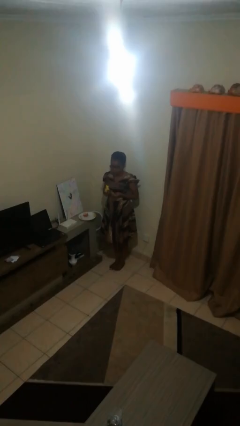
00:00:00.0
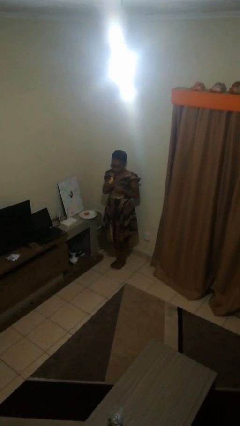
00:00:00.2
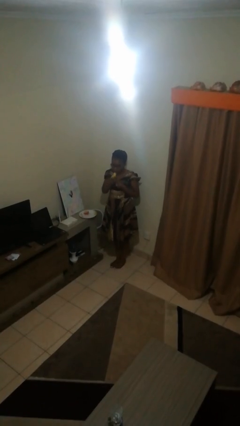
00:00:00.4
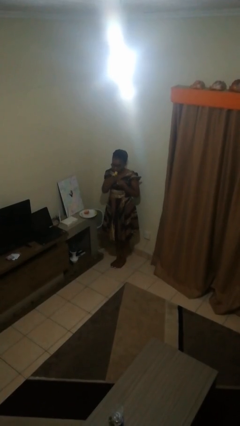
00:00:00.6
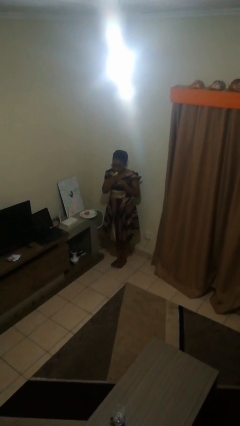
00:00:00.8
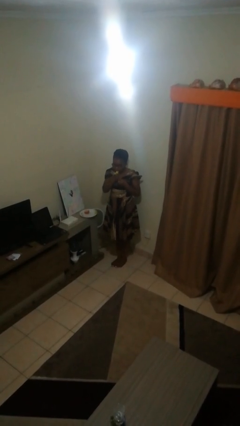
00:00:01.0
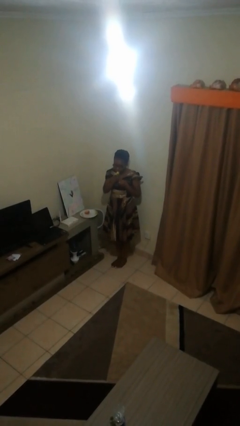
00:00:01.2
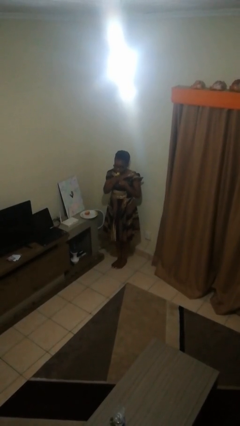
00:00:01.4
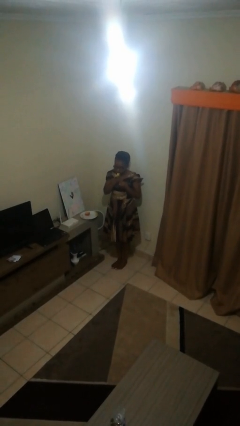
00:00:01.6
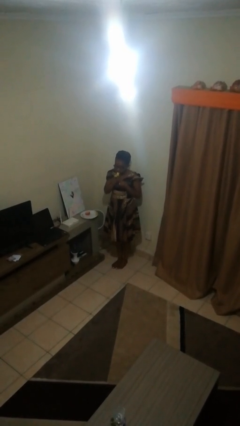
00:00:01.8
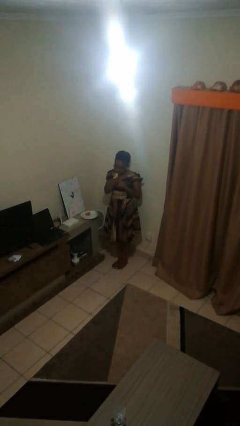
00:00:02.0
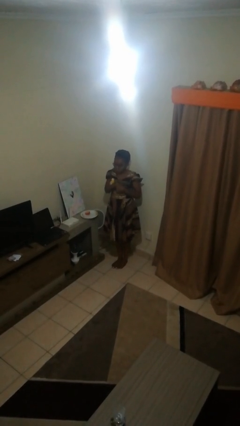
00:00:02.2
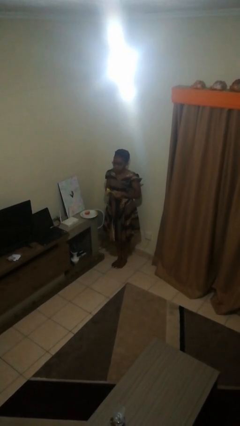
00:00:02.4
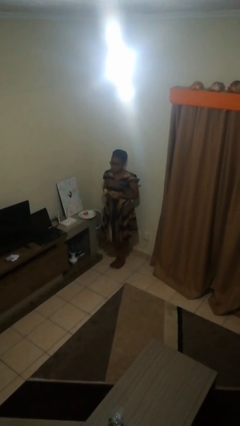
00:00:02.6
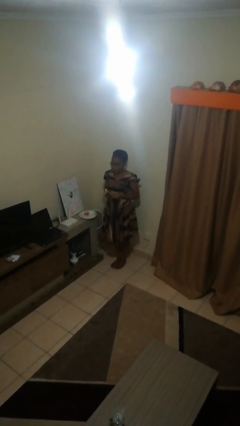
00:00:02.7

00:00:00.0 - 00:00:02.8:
person eats banana

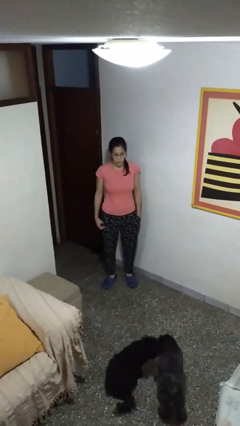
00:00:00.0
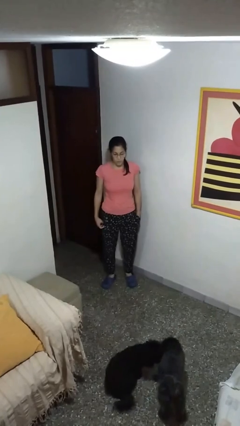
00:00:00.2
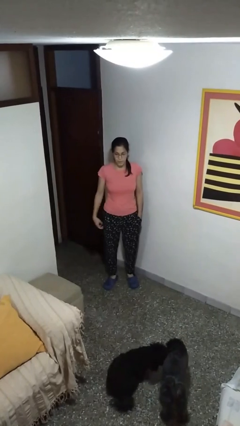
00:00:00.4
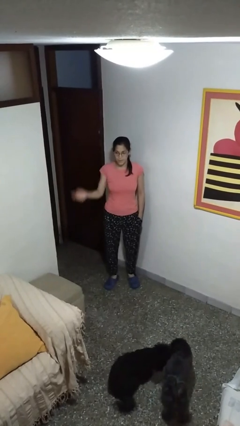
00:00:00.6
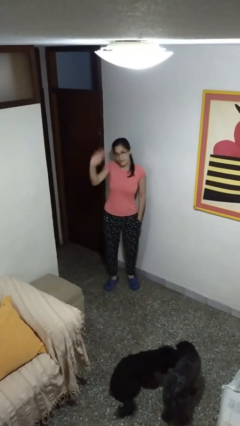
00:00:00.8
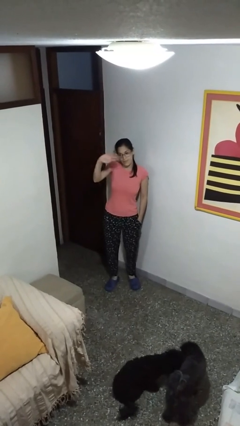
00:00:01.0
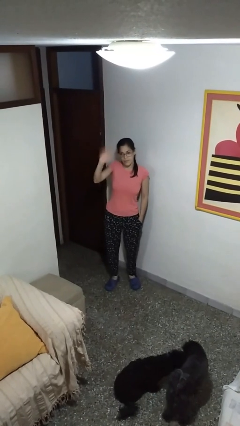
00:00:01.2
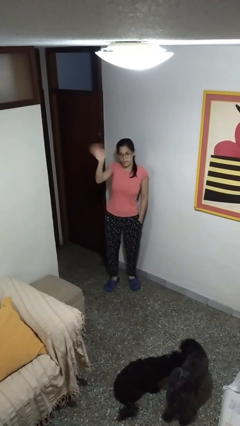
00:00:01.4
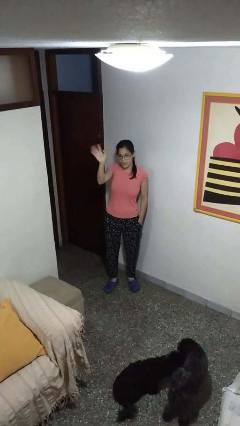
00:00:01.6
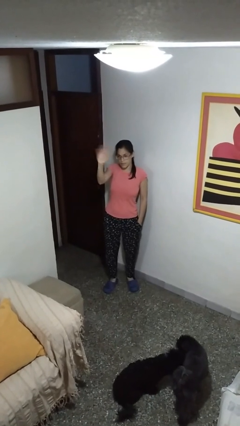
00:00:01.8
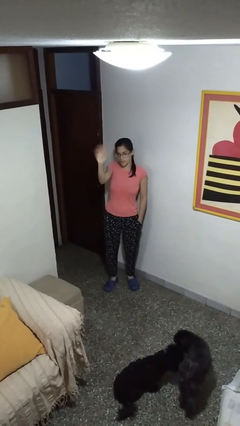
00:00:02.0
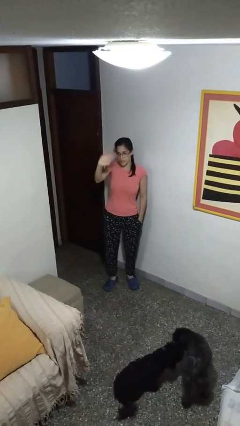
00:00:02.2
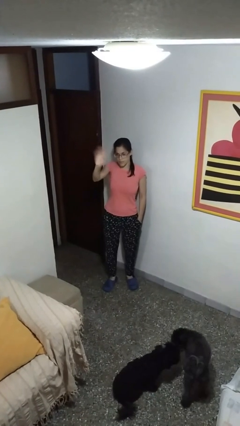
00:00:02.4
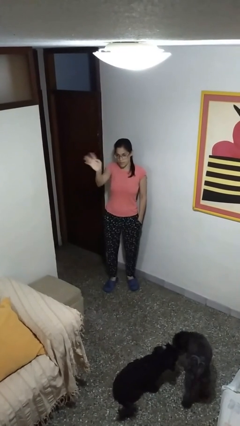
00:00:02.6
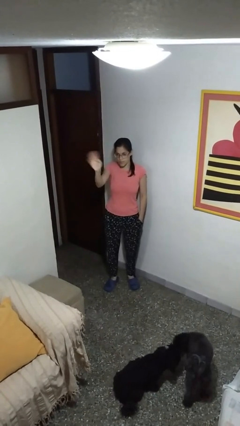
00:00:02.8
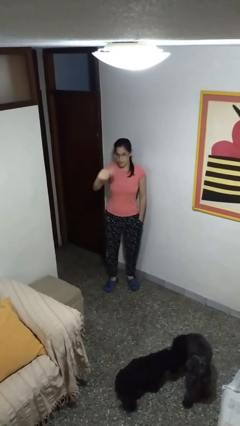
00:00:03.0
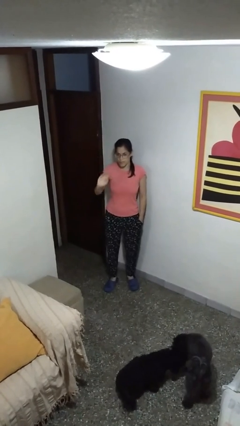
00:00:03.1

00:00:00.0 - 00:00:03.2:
person waves at person

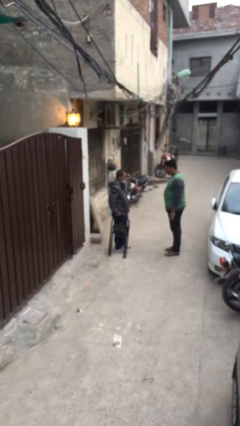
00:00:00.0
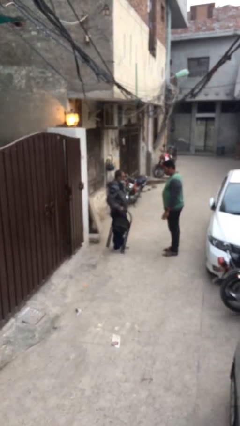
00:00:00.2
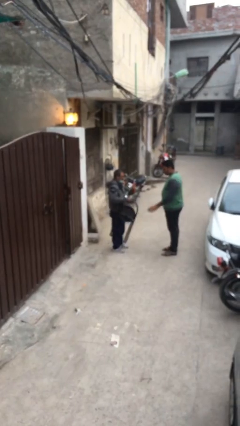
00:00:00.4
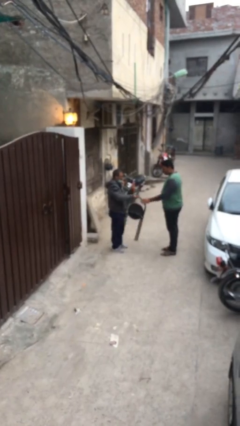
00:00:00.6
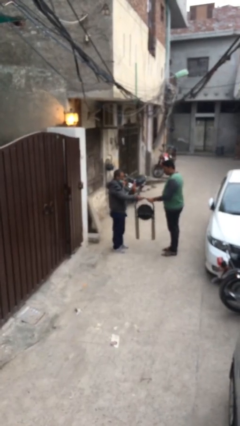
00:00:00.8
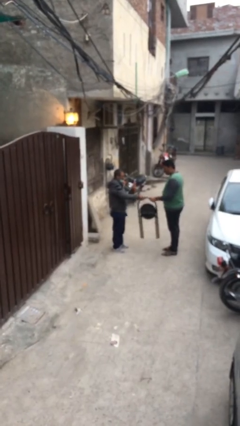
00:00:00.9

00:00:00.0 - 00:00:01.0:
person transfers object to person

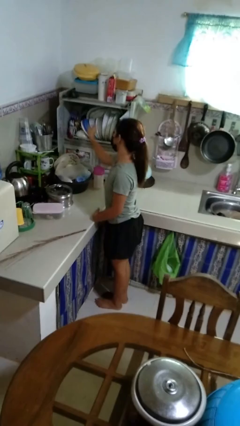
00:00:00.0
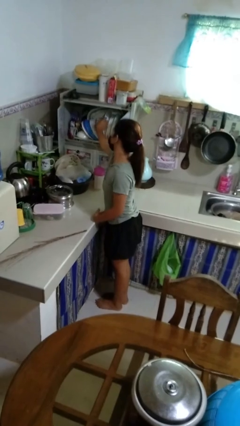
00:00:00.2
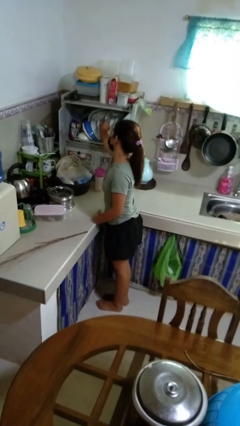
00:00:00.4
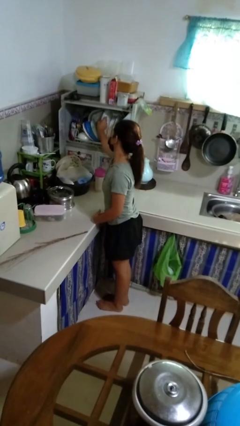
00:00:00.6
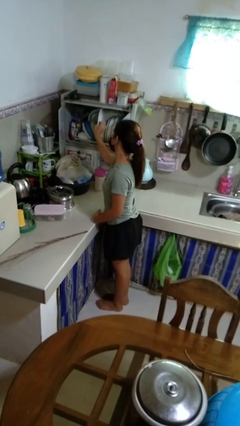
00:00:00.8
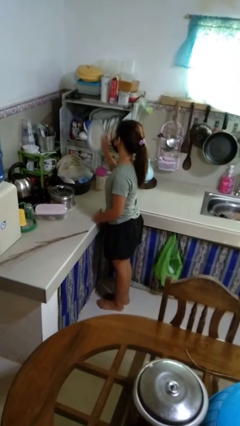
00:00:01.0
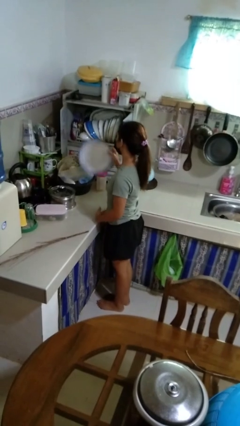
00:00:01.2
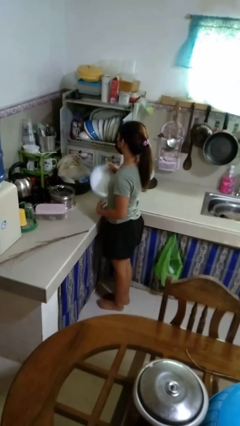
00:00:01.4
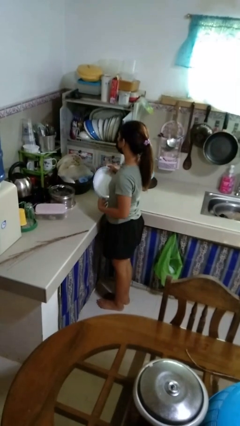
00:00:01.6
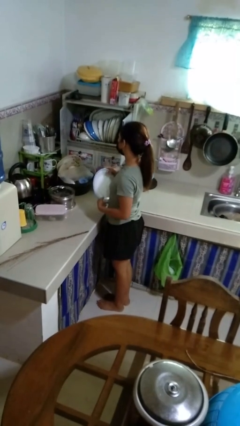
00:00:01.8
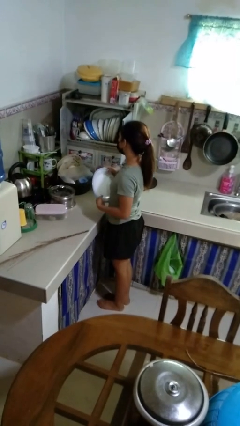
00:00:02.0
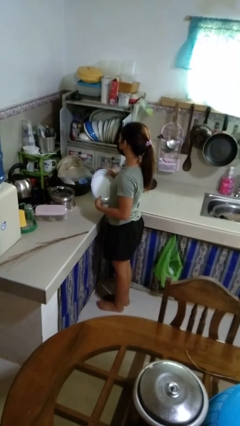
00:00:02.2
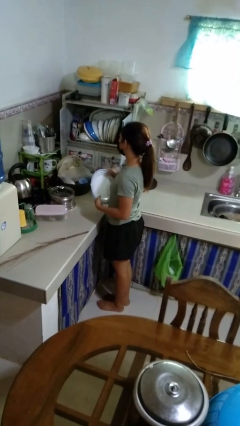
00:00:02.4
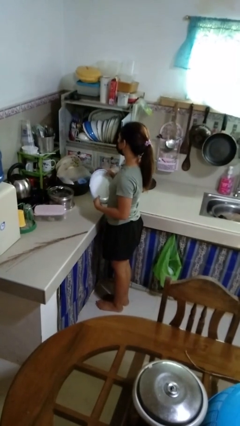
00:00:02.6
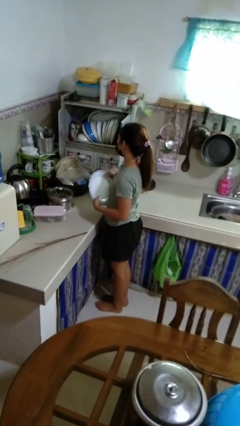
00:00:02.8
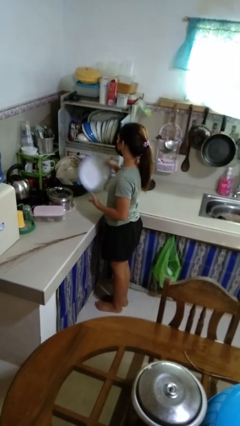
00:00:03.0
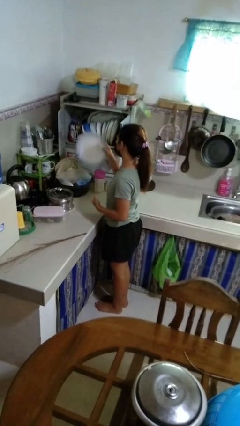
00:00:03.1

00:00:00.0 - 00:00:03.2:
person takes object from kitchen drawer

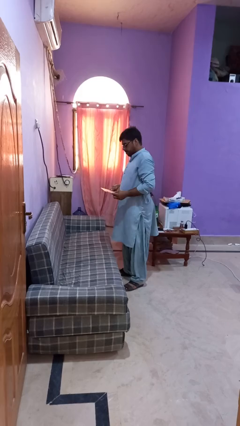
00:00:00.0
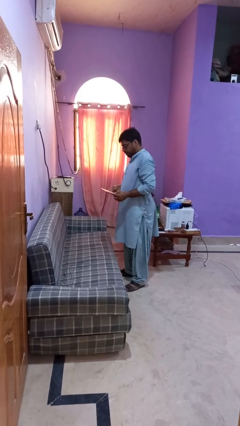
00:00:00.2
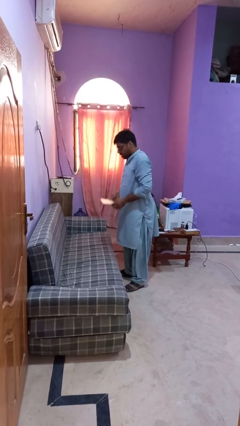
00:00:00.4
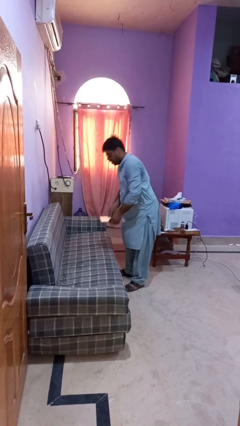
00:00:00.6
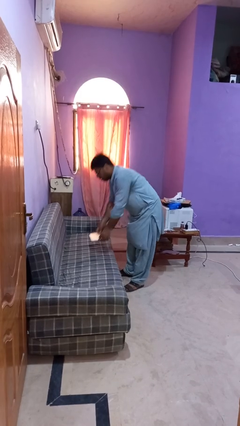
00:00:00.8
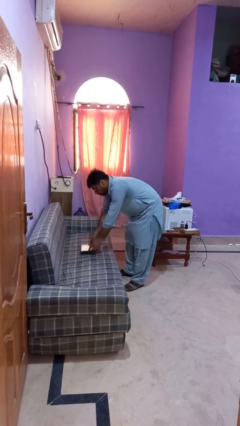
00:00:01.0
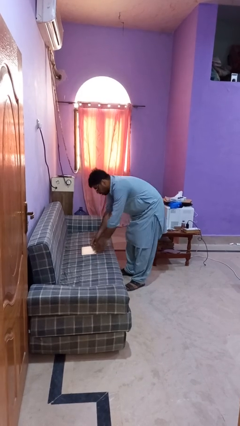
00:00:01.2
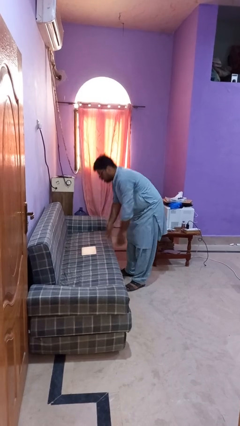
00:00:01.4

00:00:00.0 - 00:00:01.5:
person puts down object on couch

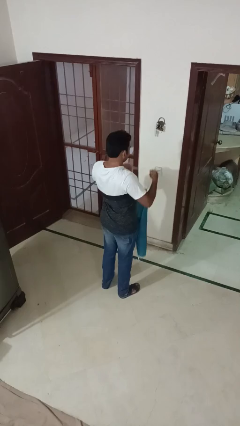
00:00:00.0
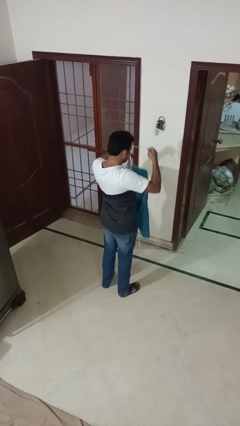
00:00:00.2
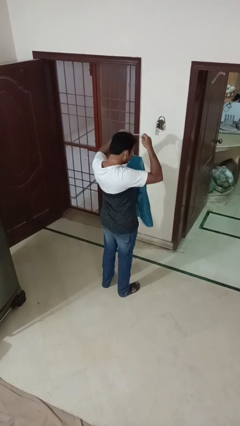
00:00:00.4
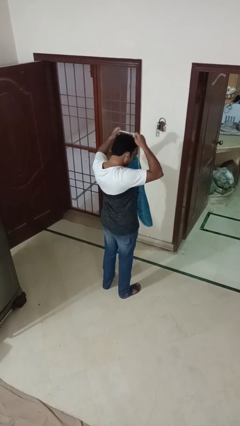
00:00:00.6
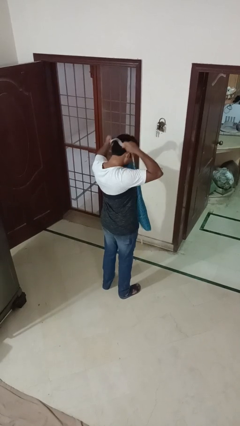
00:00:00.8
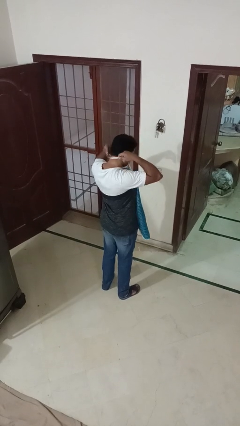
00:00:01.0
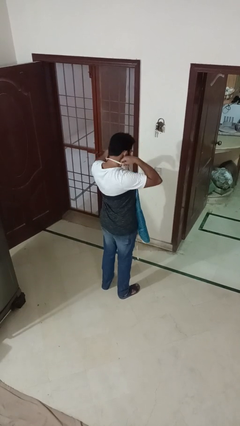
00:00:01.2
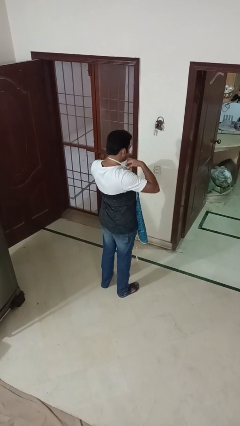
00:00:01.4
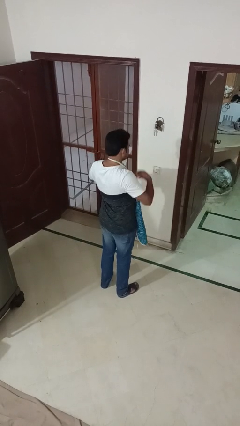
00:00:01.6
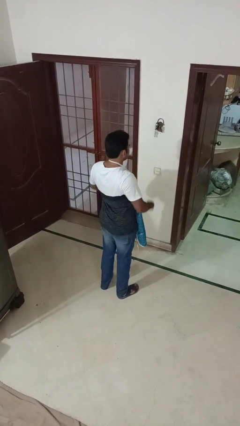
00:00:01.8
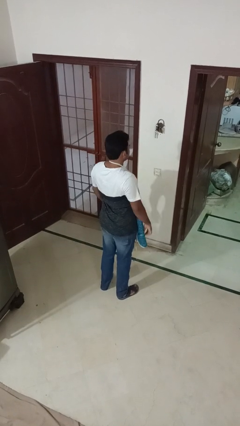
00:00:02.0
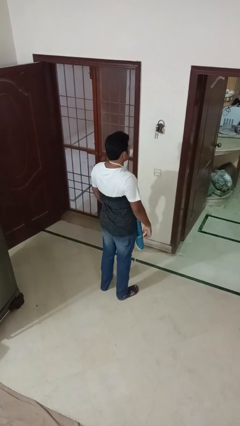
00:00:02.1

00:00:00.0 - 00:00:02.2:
person puts on apron

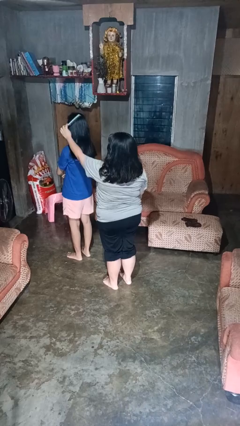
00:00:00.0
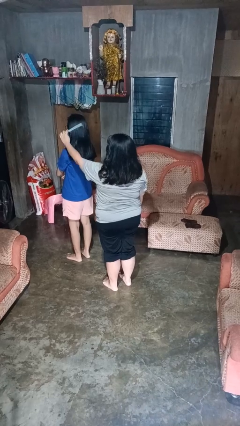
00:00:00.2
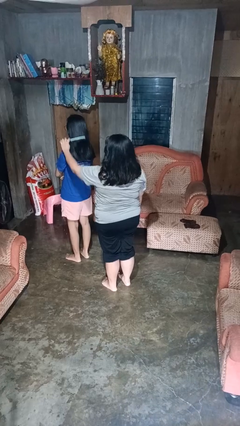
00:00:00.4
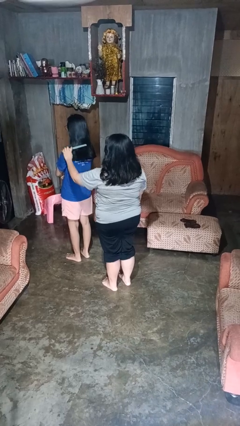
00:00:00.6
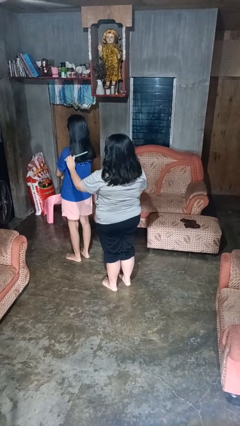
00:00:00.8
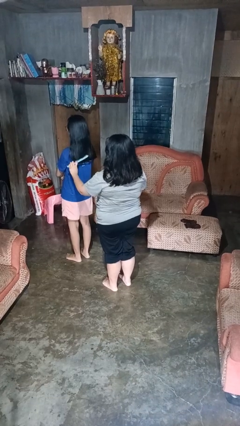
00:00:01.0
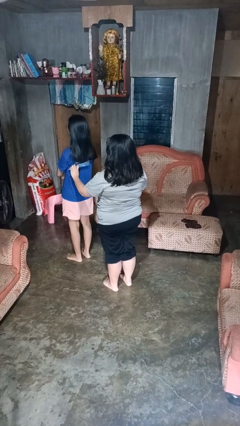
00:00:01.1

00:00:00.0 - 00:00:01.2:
person brushes hair of person

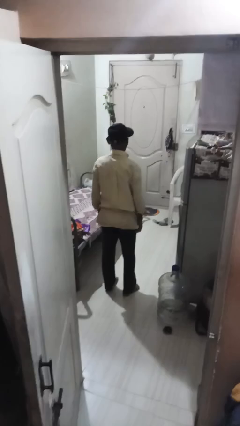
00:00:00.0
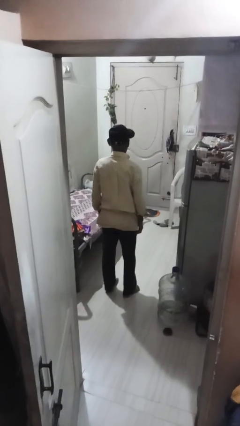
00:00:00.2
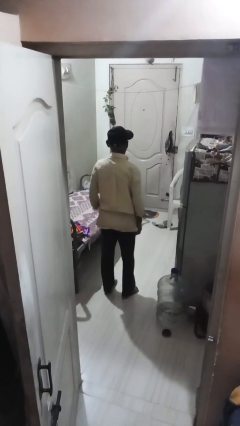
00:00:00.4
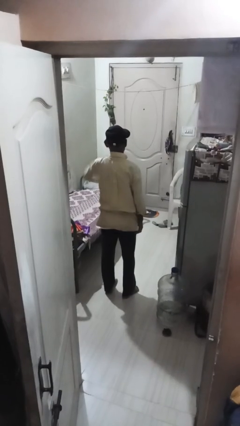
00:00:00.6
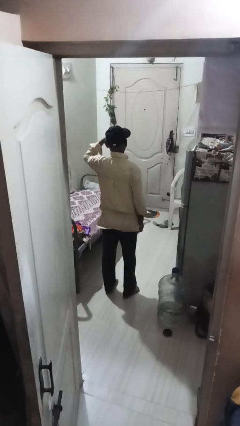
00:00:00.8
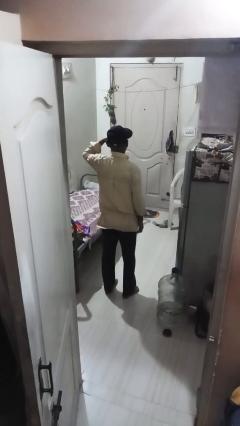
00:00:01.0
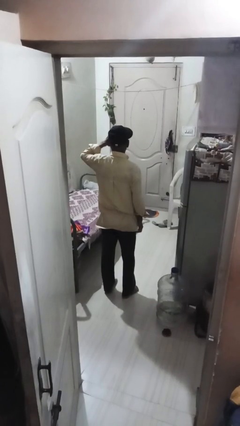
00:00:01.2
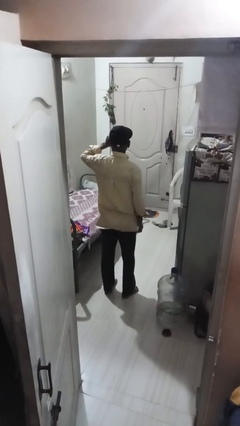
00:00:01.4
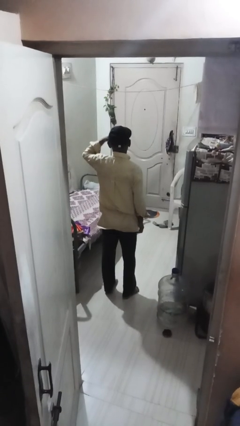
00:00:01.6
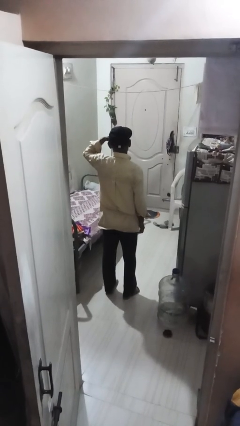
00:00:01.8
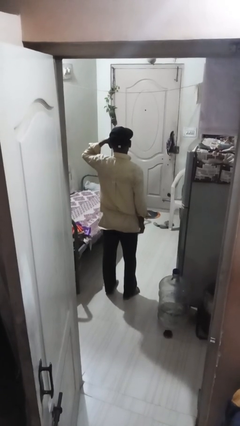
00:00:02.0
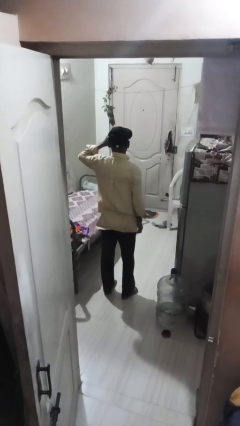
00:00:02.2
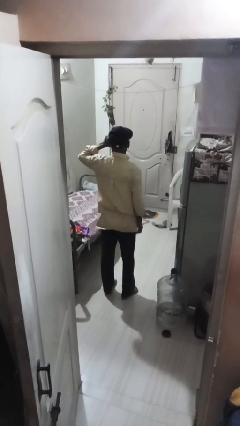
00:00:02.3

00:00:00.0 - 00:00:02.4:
person rubs eyes
